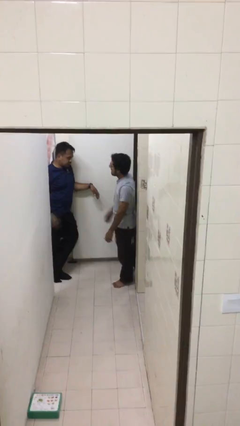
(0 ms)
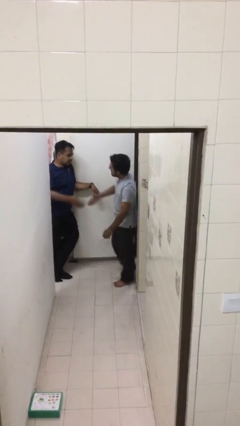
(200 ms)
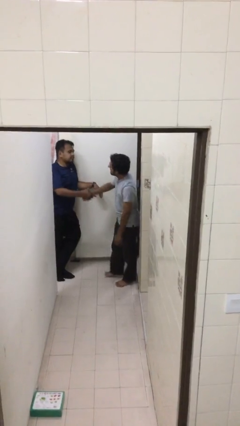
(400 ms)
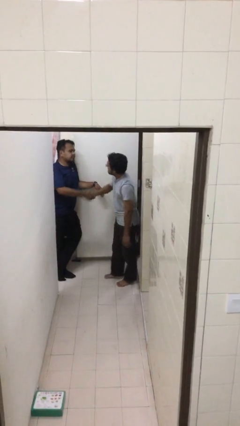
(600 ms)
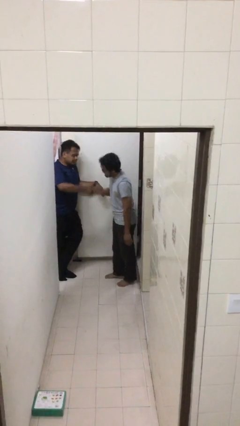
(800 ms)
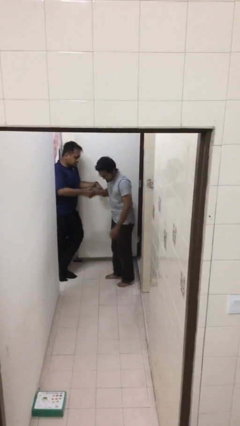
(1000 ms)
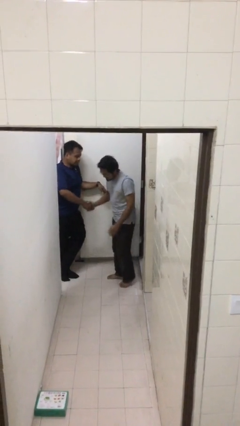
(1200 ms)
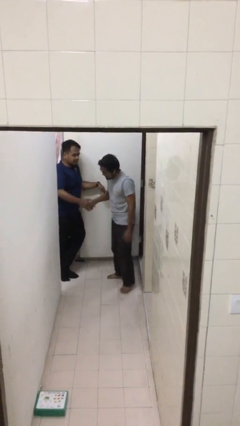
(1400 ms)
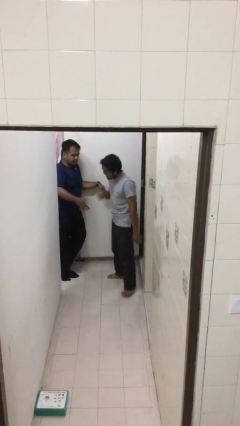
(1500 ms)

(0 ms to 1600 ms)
person shakes hand

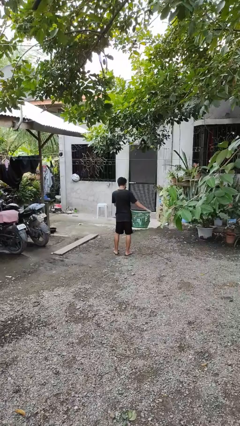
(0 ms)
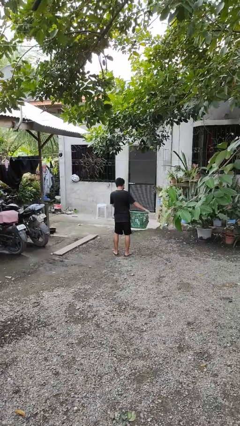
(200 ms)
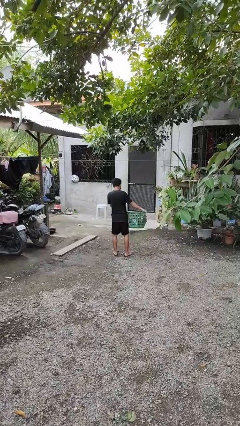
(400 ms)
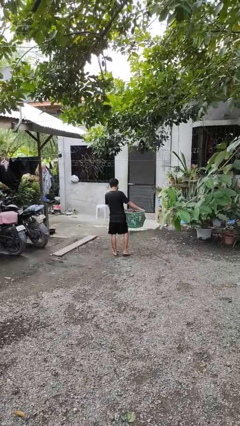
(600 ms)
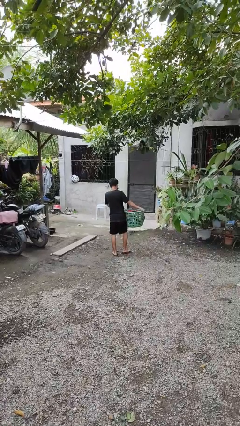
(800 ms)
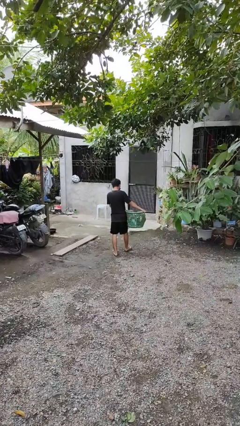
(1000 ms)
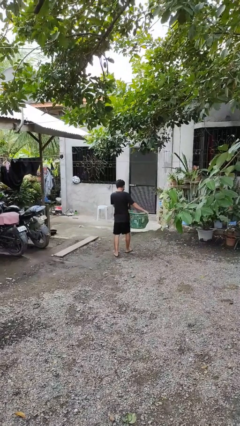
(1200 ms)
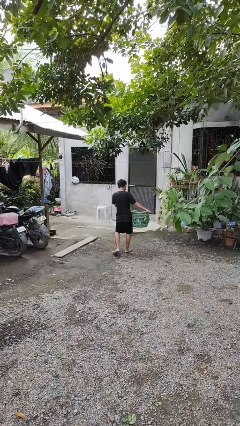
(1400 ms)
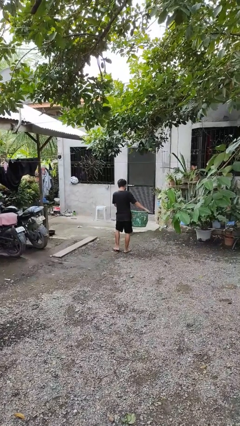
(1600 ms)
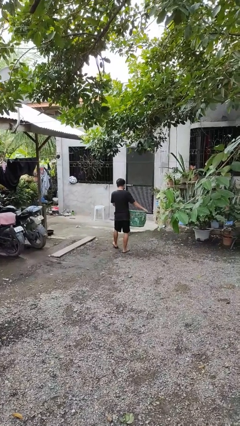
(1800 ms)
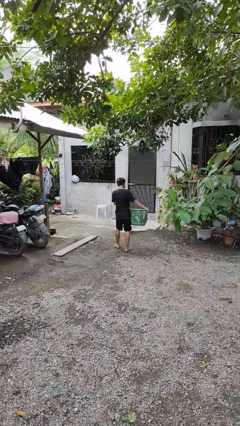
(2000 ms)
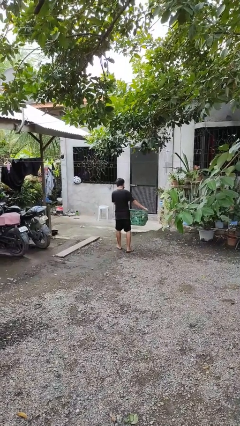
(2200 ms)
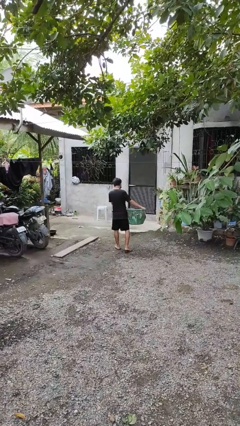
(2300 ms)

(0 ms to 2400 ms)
person carries laundry basket

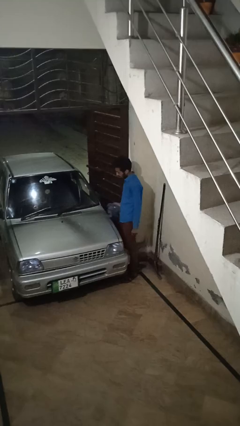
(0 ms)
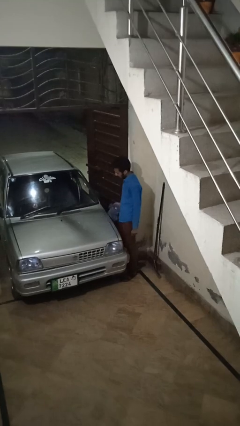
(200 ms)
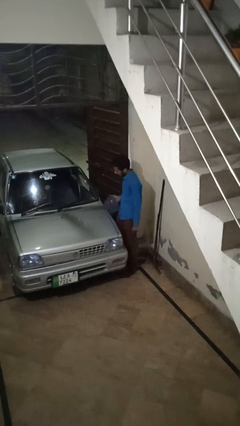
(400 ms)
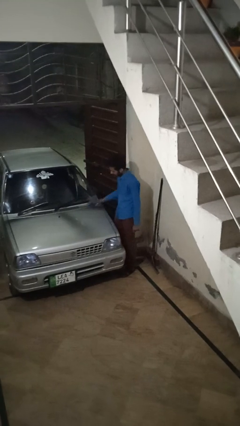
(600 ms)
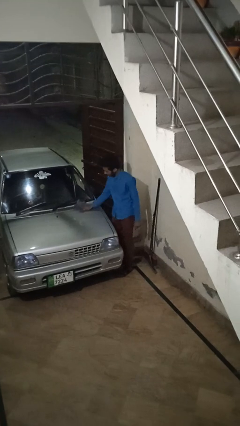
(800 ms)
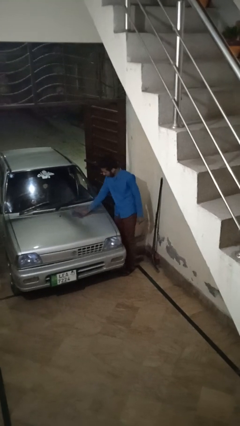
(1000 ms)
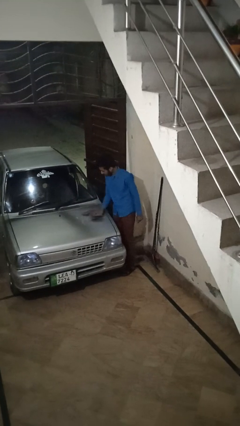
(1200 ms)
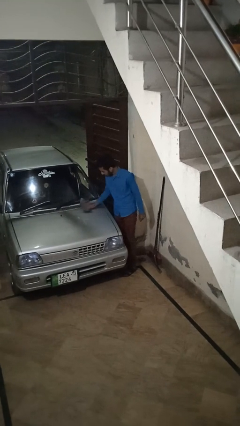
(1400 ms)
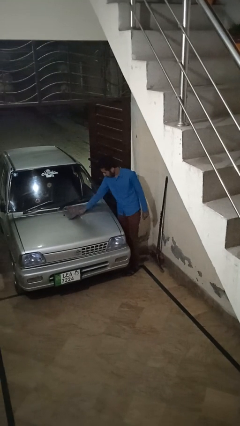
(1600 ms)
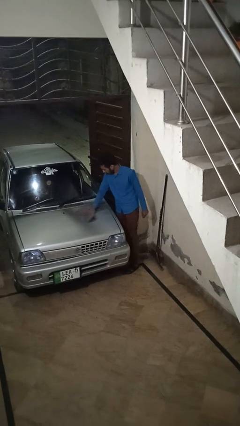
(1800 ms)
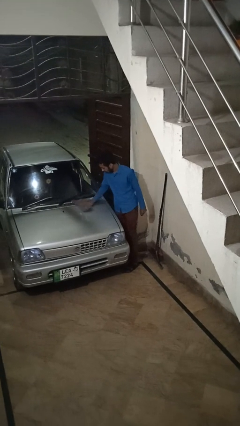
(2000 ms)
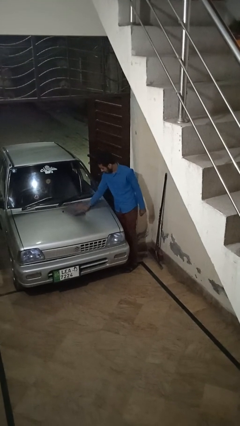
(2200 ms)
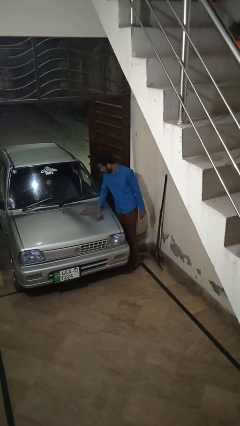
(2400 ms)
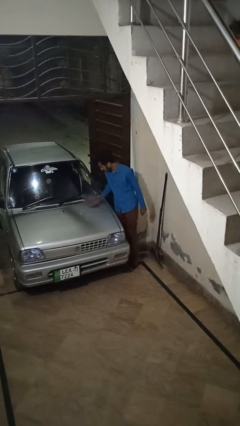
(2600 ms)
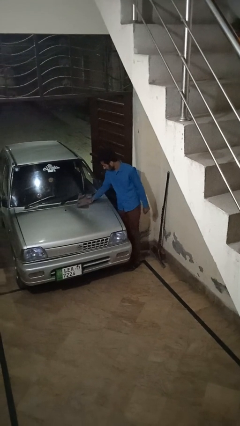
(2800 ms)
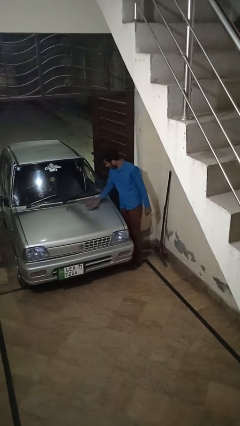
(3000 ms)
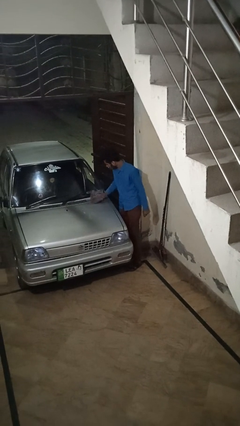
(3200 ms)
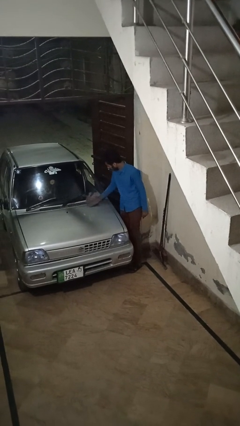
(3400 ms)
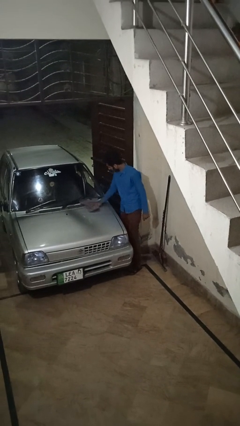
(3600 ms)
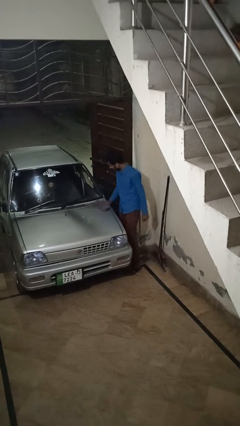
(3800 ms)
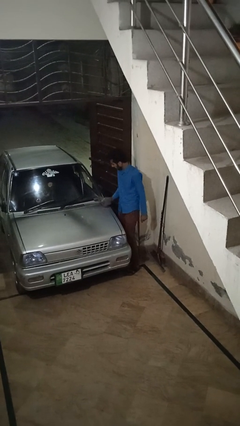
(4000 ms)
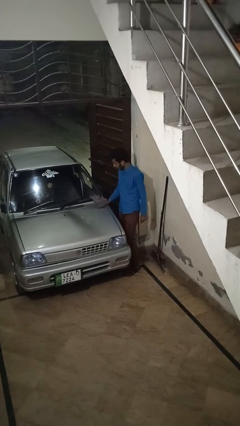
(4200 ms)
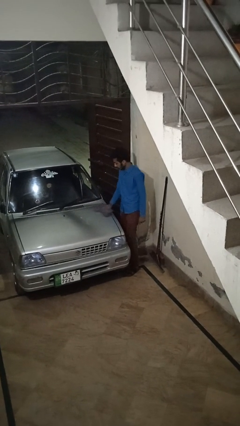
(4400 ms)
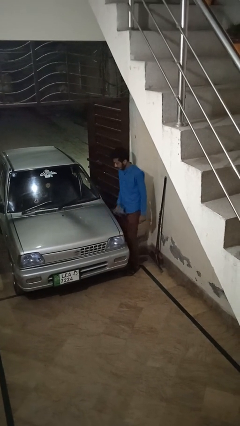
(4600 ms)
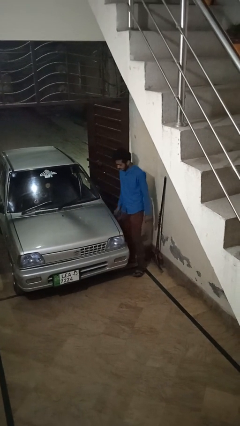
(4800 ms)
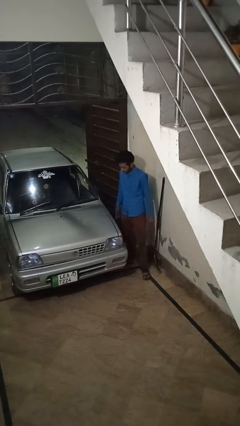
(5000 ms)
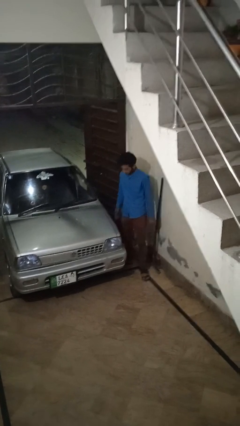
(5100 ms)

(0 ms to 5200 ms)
person polishes car with rag

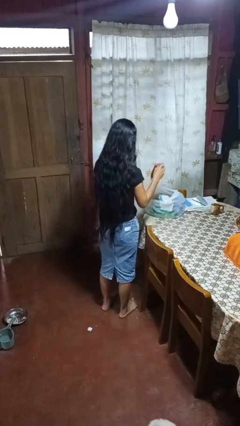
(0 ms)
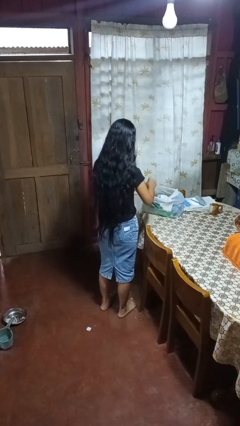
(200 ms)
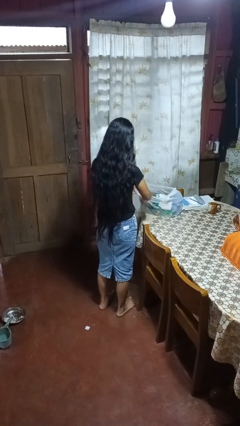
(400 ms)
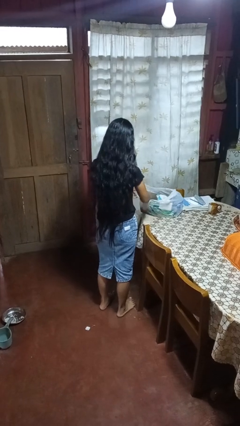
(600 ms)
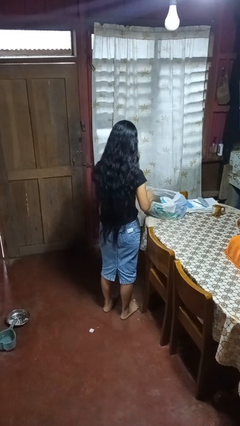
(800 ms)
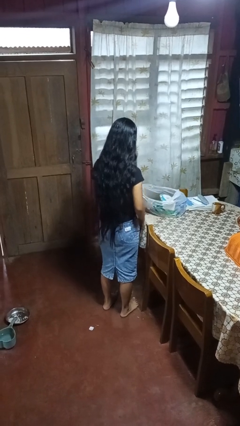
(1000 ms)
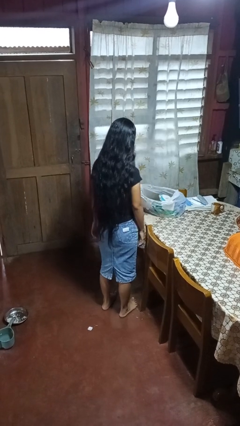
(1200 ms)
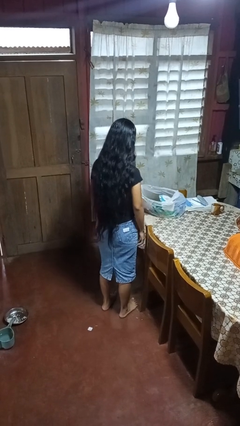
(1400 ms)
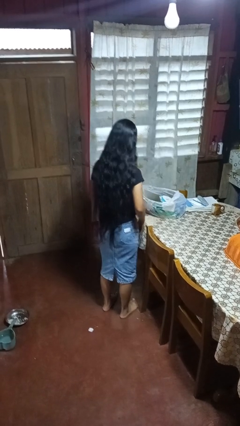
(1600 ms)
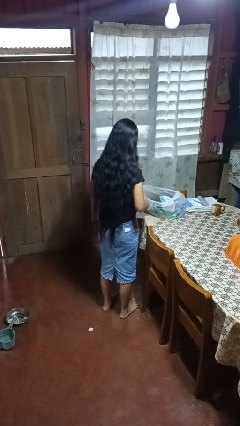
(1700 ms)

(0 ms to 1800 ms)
person puts object into bag

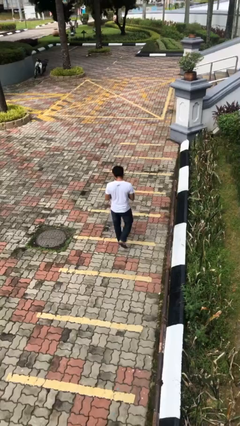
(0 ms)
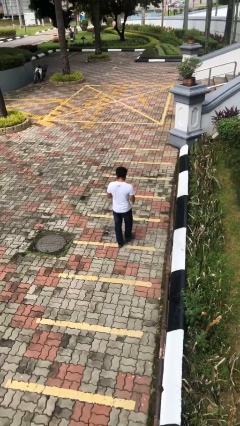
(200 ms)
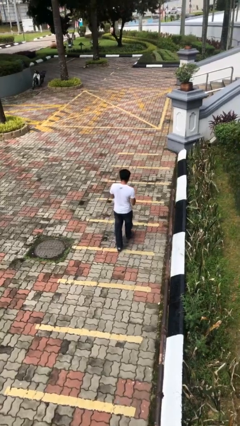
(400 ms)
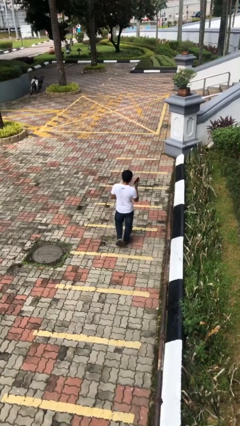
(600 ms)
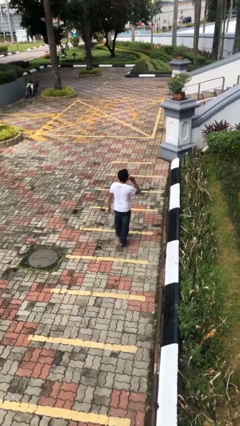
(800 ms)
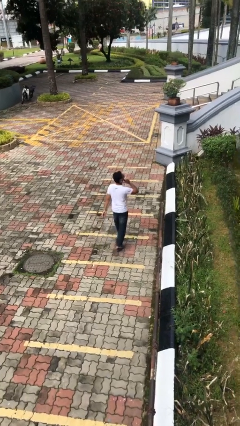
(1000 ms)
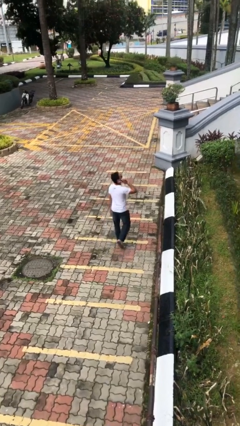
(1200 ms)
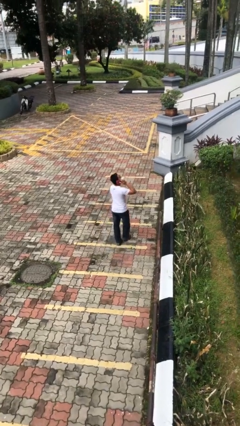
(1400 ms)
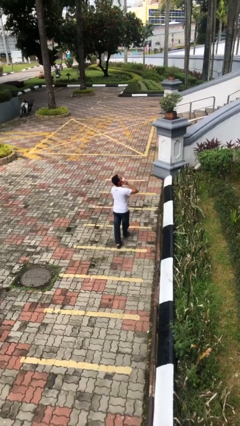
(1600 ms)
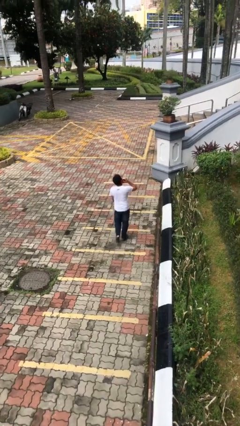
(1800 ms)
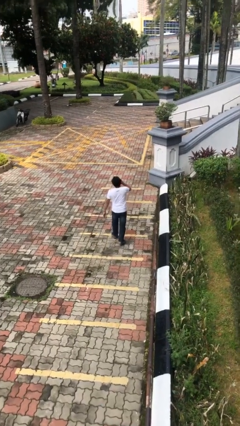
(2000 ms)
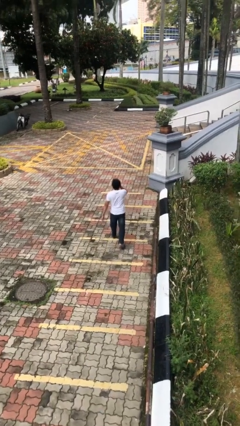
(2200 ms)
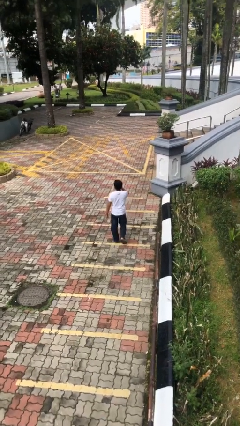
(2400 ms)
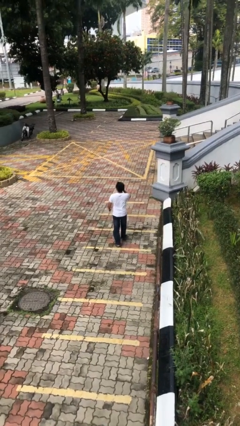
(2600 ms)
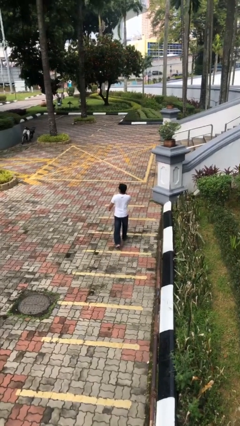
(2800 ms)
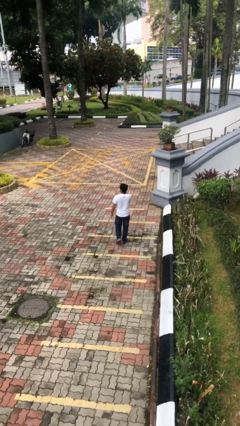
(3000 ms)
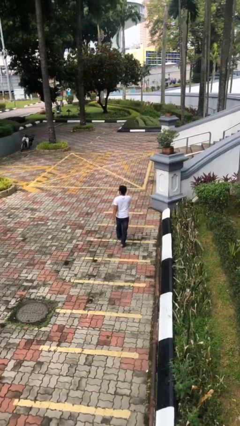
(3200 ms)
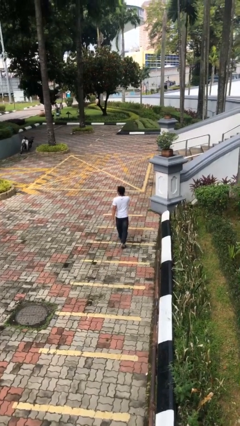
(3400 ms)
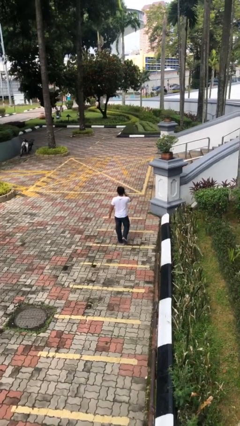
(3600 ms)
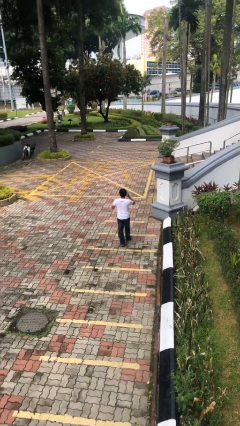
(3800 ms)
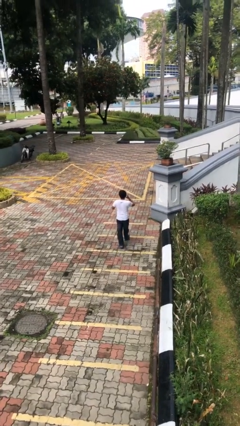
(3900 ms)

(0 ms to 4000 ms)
person talks on phone

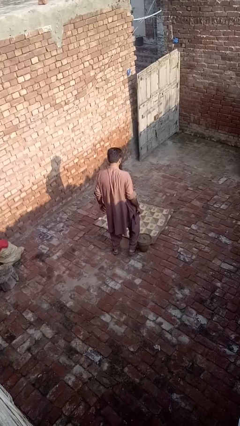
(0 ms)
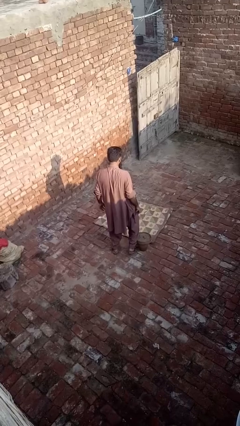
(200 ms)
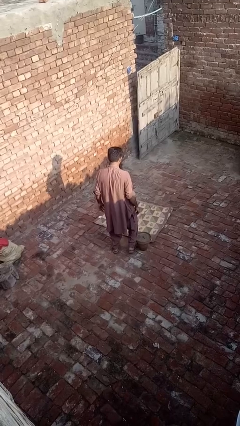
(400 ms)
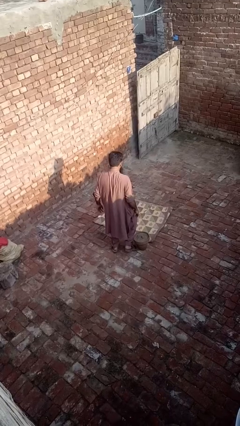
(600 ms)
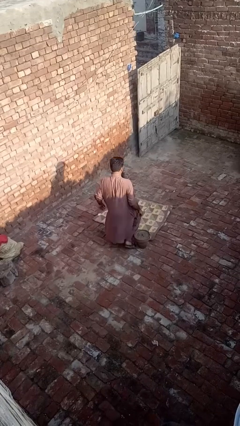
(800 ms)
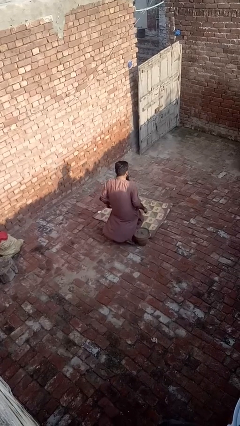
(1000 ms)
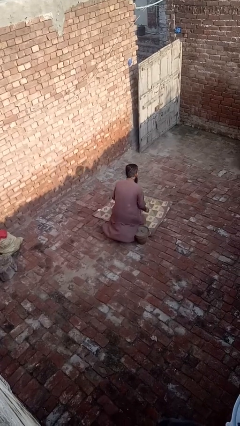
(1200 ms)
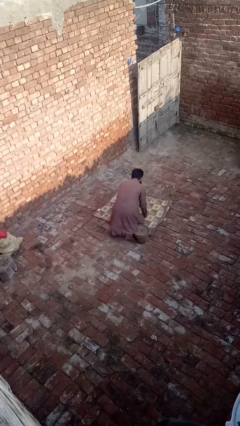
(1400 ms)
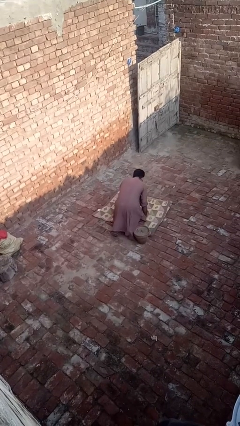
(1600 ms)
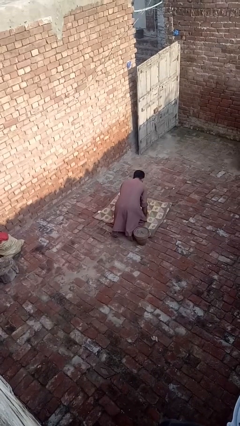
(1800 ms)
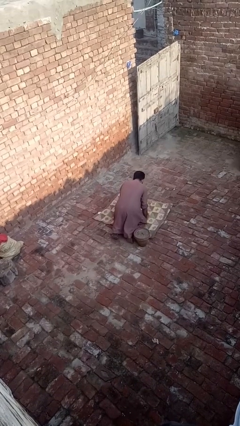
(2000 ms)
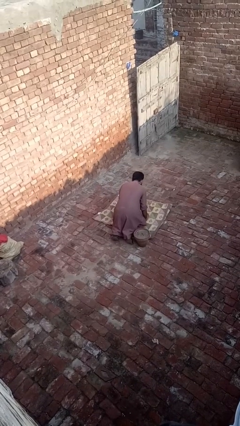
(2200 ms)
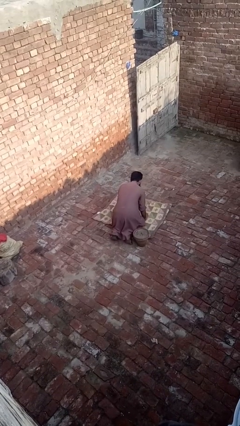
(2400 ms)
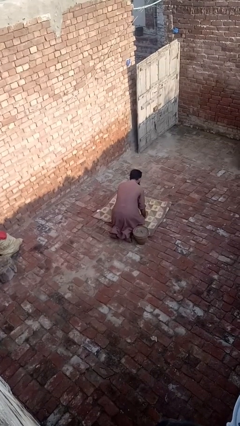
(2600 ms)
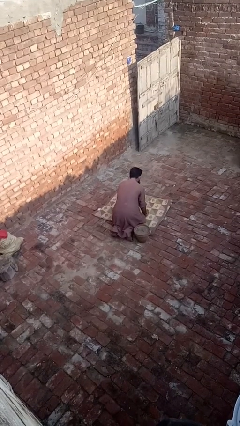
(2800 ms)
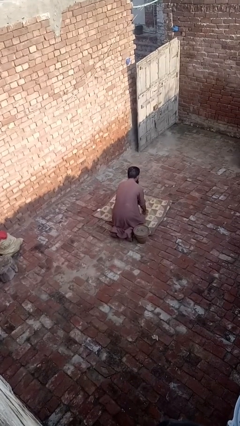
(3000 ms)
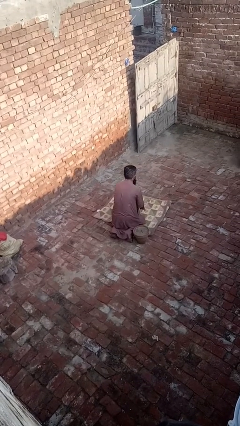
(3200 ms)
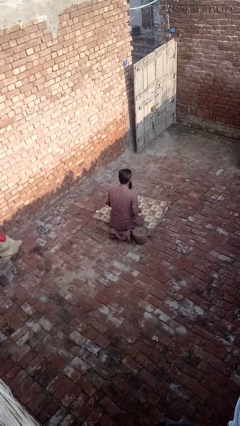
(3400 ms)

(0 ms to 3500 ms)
person lies down on floor
